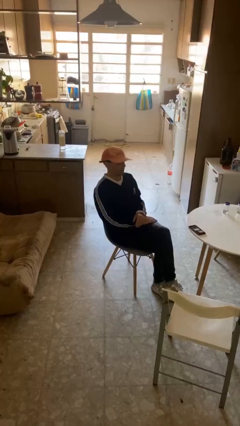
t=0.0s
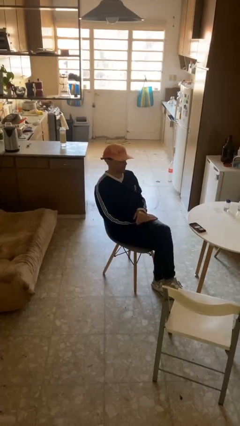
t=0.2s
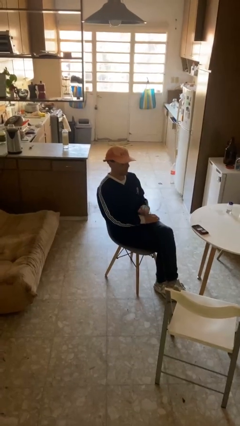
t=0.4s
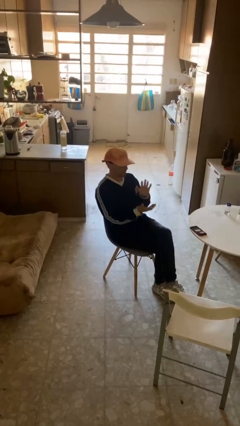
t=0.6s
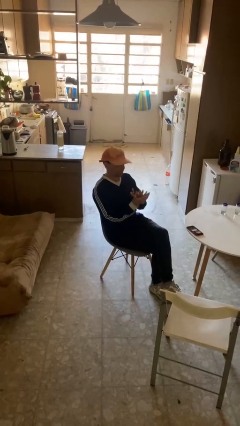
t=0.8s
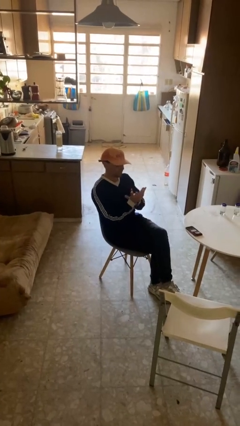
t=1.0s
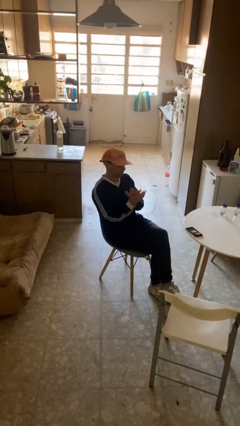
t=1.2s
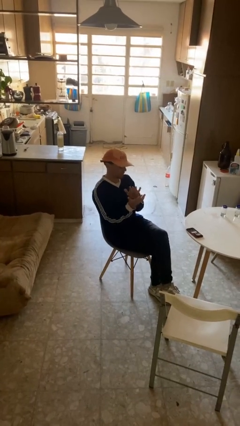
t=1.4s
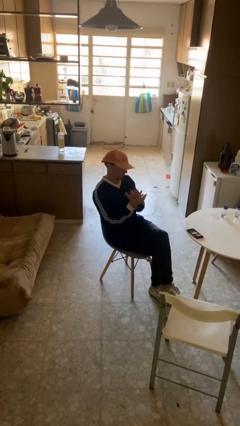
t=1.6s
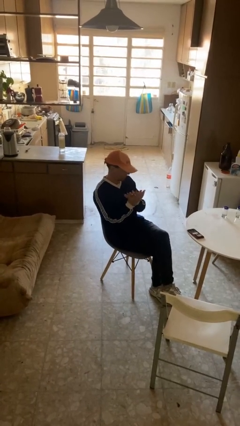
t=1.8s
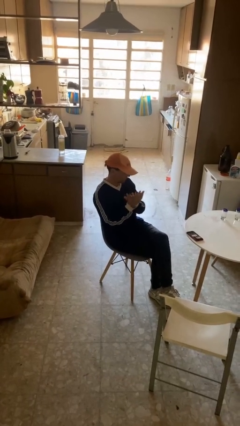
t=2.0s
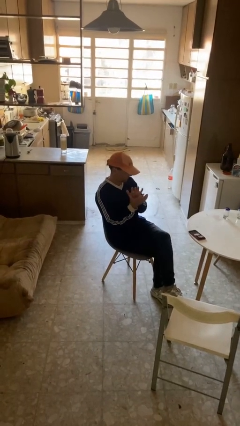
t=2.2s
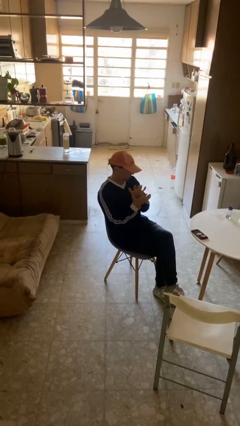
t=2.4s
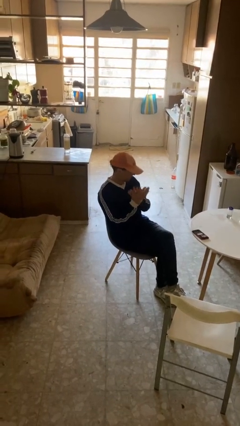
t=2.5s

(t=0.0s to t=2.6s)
person claps hands

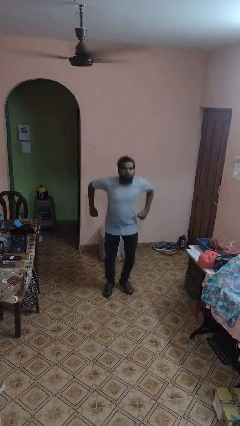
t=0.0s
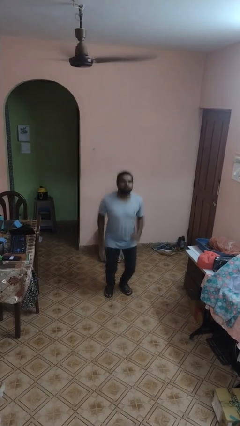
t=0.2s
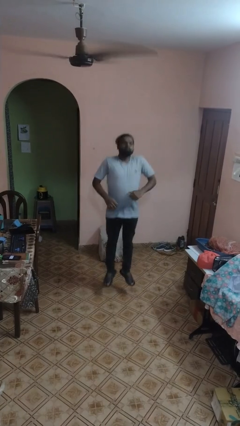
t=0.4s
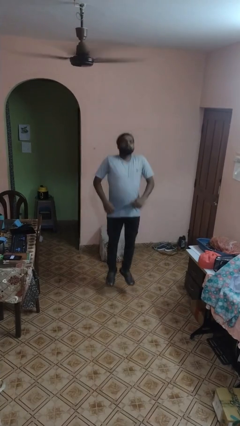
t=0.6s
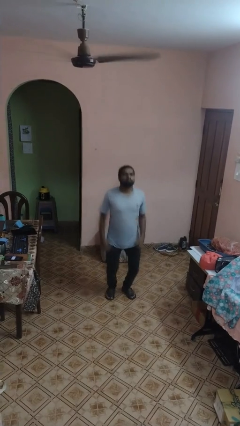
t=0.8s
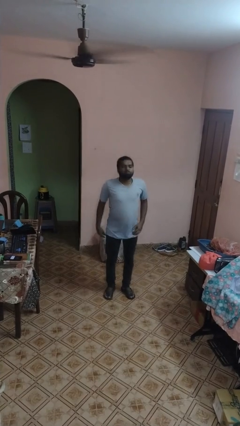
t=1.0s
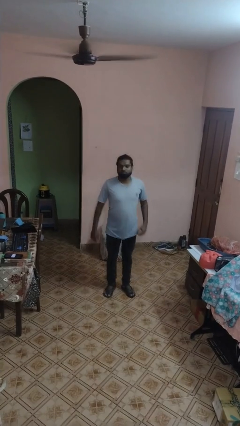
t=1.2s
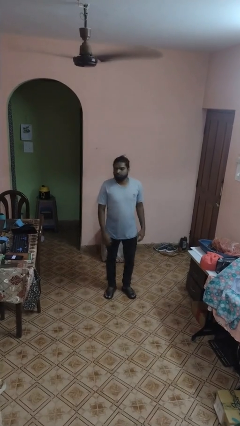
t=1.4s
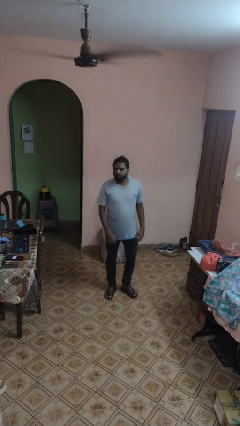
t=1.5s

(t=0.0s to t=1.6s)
person jumps

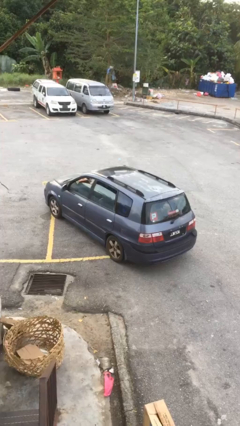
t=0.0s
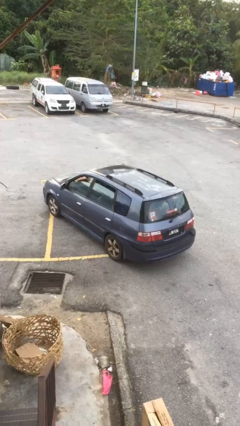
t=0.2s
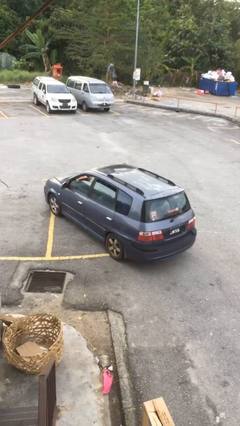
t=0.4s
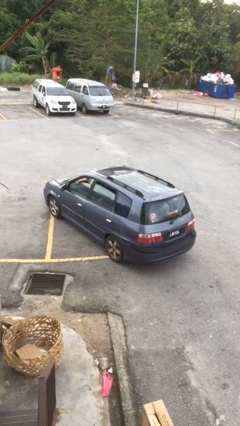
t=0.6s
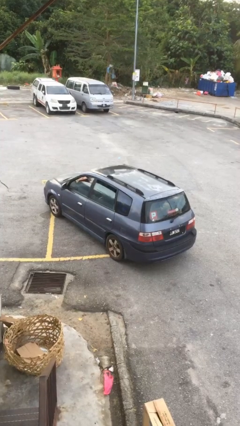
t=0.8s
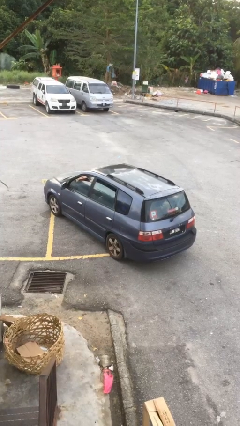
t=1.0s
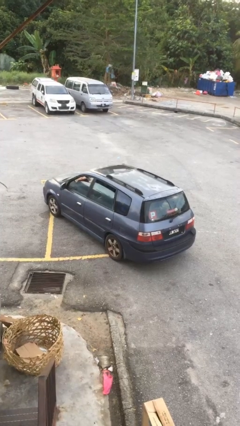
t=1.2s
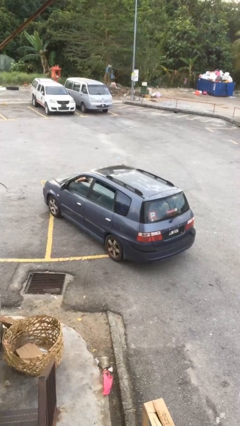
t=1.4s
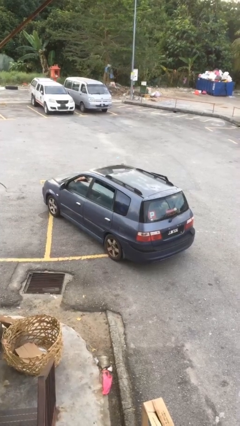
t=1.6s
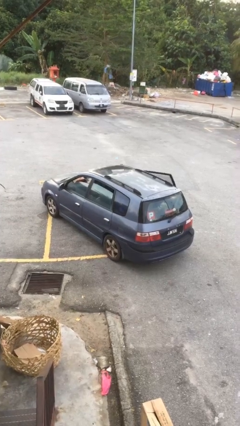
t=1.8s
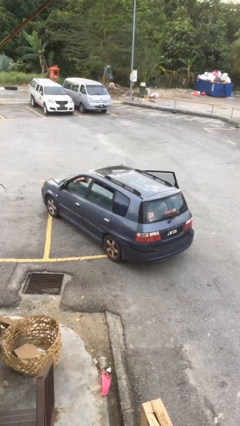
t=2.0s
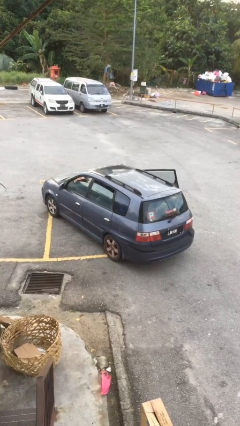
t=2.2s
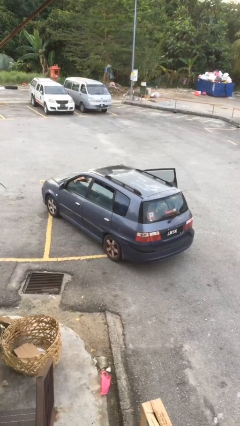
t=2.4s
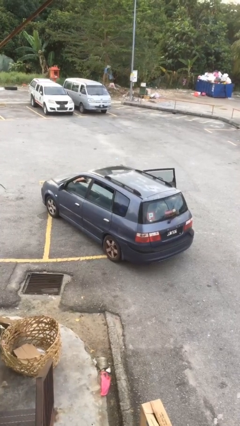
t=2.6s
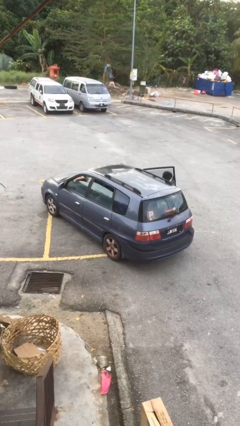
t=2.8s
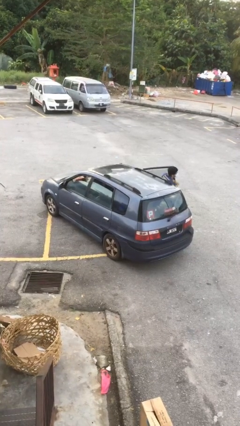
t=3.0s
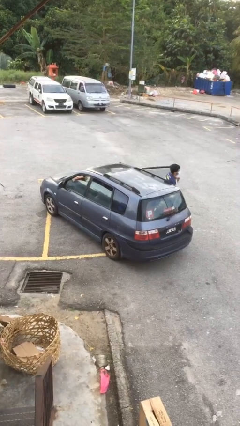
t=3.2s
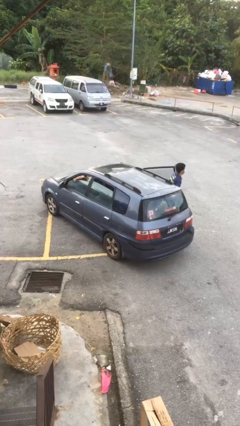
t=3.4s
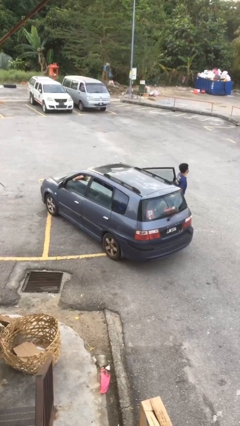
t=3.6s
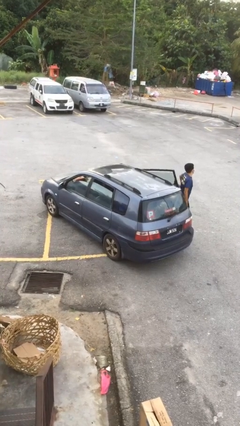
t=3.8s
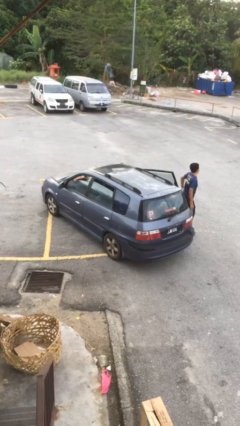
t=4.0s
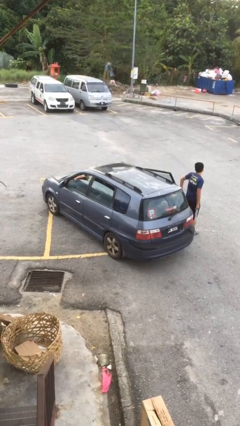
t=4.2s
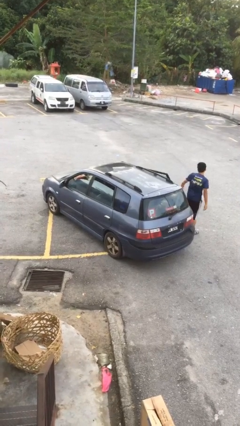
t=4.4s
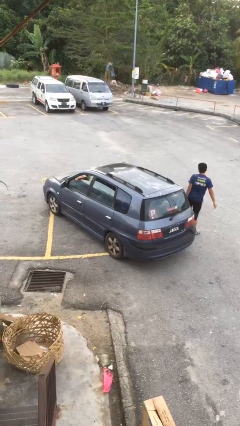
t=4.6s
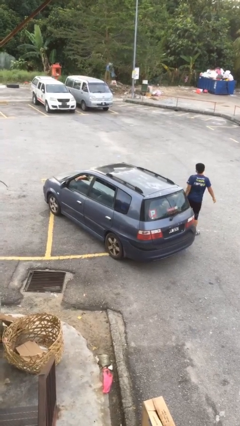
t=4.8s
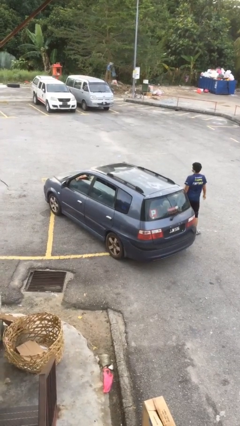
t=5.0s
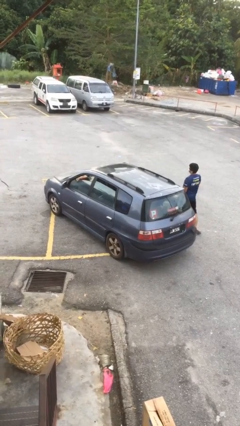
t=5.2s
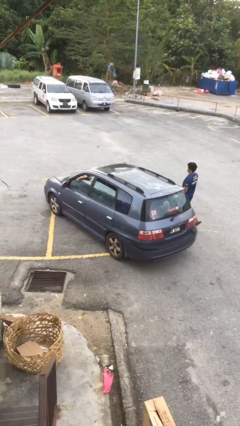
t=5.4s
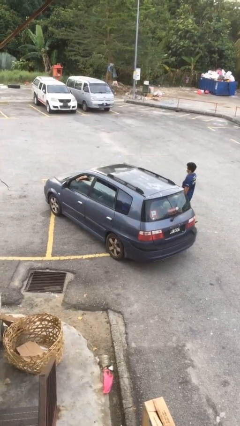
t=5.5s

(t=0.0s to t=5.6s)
car drops off person

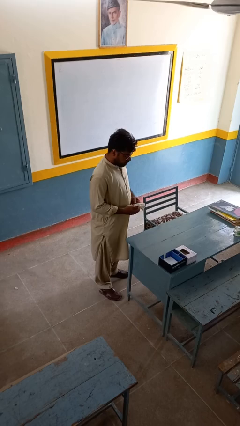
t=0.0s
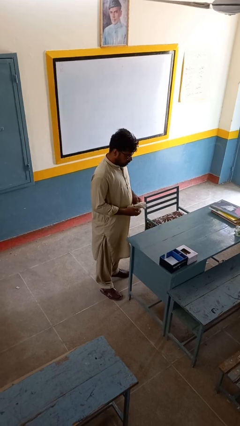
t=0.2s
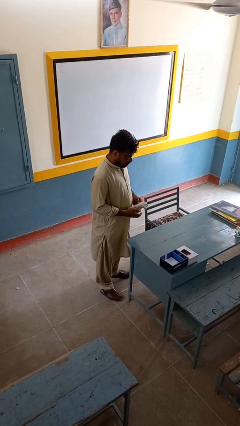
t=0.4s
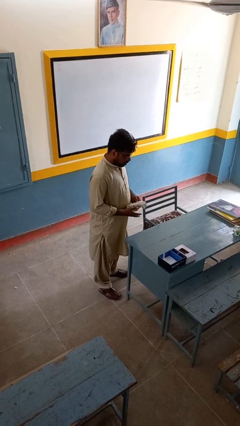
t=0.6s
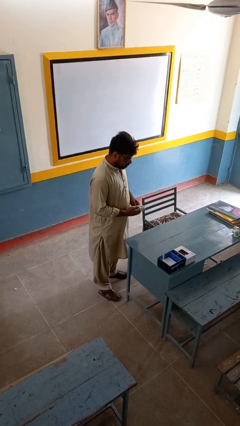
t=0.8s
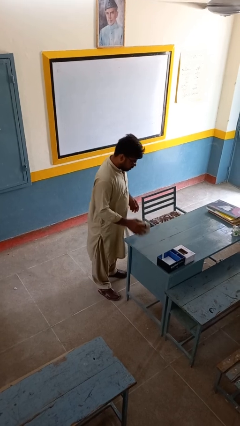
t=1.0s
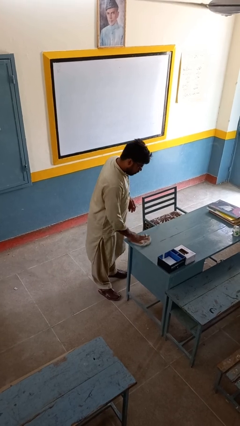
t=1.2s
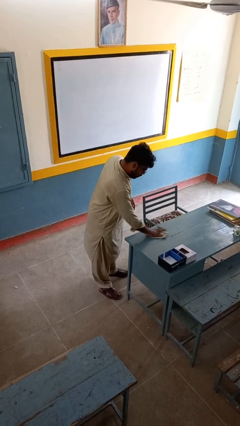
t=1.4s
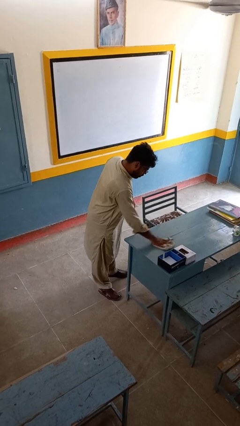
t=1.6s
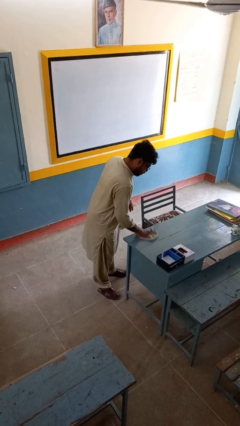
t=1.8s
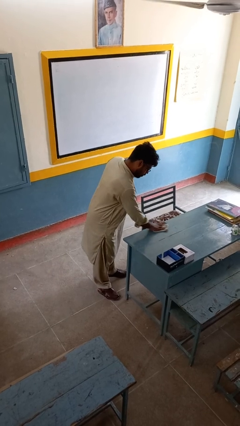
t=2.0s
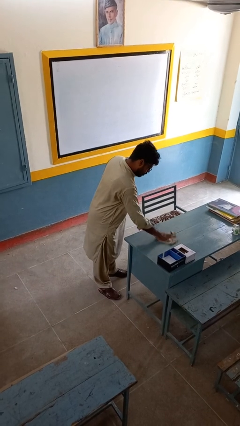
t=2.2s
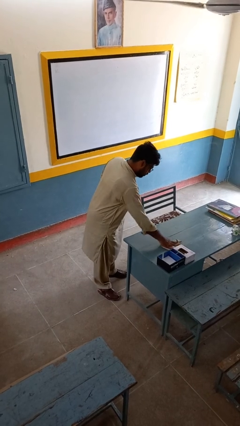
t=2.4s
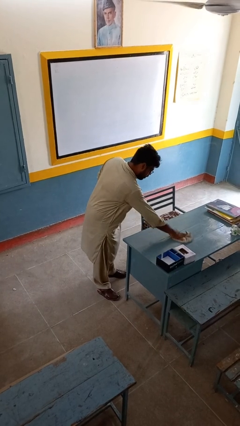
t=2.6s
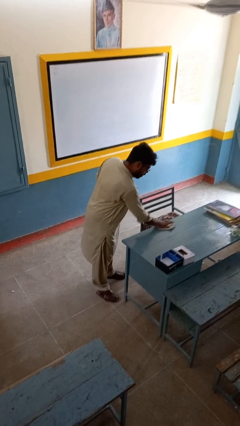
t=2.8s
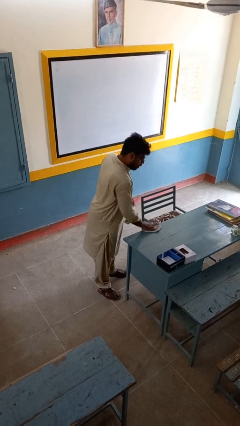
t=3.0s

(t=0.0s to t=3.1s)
person cleans table with rag

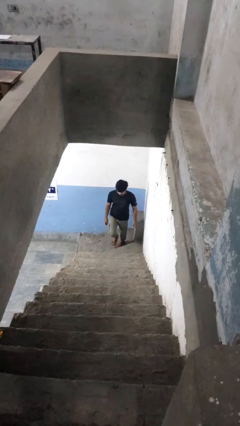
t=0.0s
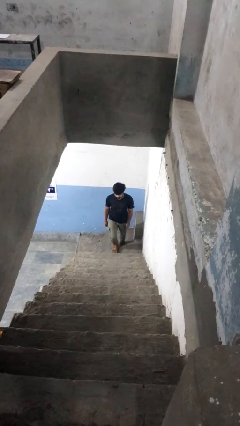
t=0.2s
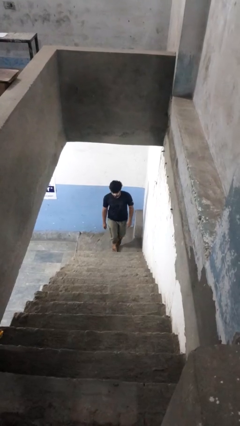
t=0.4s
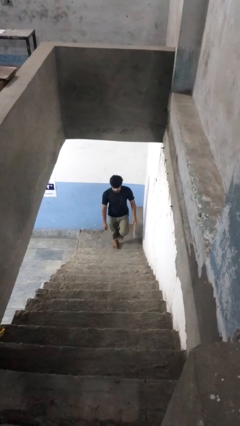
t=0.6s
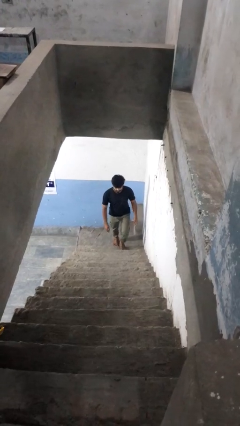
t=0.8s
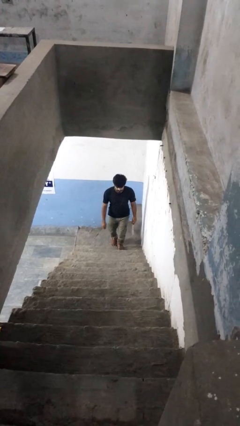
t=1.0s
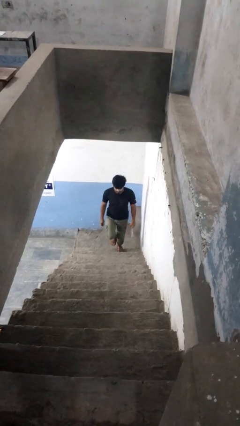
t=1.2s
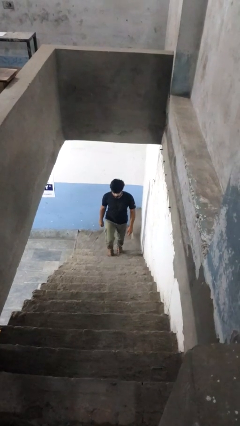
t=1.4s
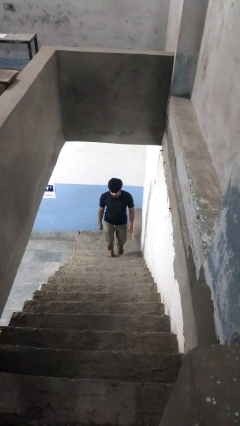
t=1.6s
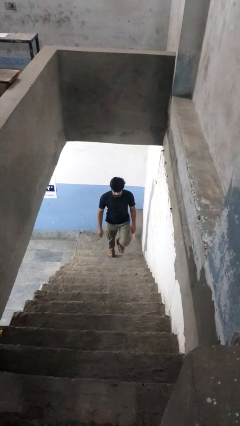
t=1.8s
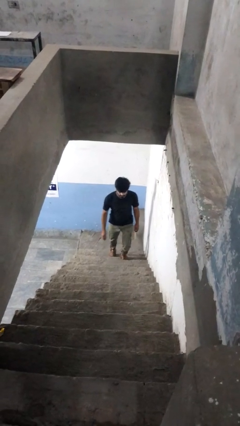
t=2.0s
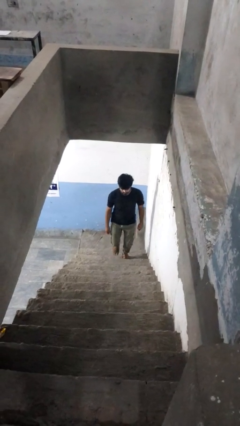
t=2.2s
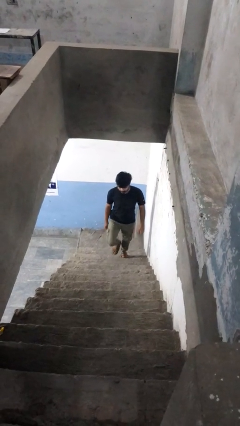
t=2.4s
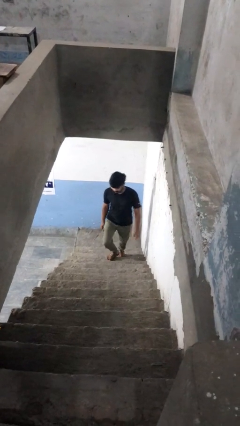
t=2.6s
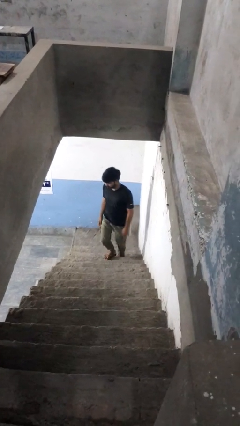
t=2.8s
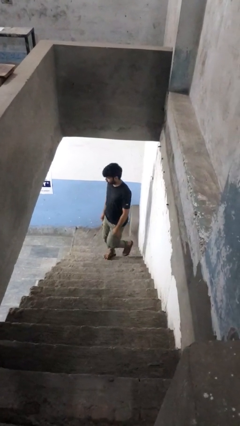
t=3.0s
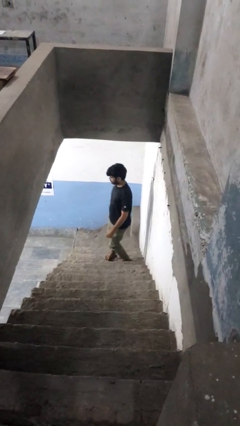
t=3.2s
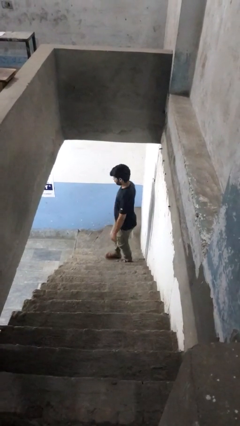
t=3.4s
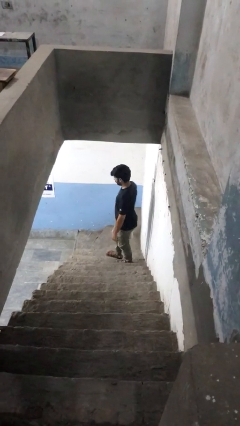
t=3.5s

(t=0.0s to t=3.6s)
person climbs up stairs

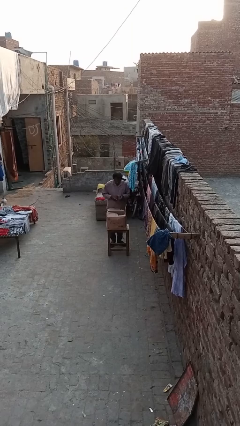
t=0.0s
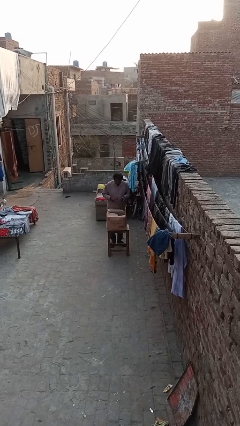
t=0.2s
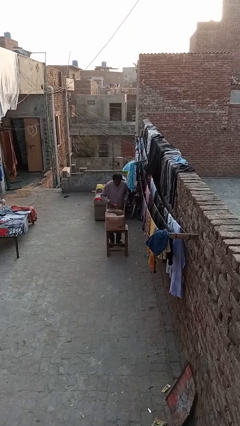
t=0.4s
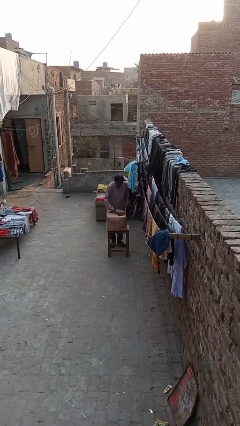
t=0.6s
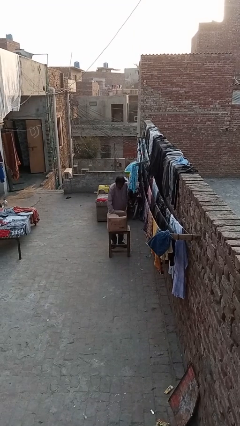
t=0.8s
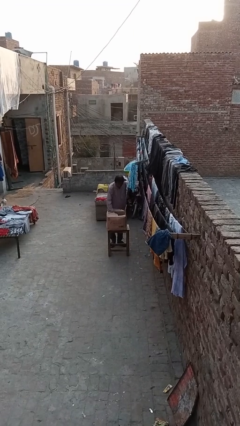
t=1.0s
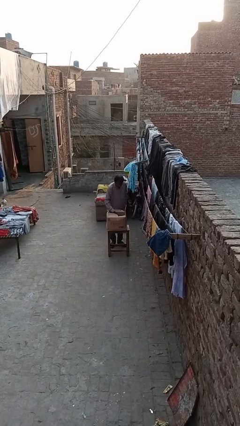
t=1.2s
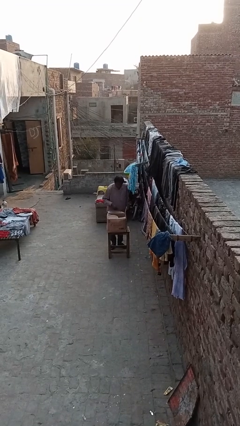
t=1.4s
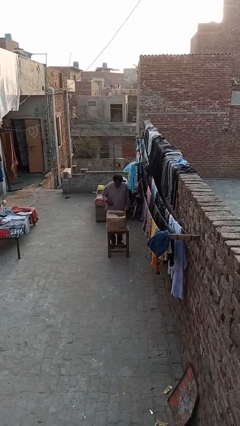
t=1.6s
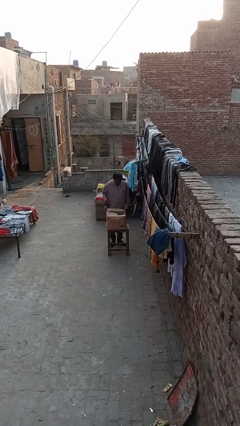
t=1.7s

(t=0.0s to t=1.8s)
person puts object into box
